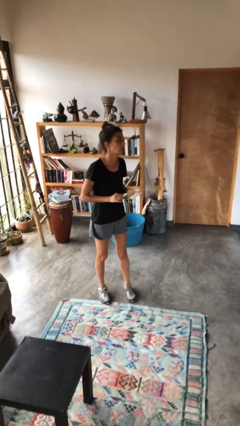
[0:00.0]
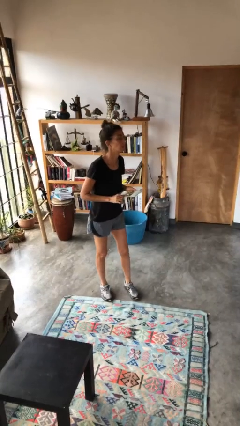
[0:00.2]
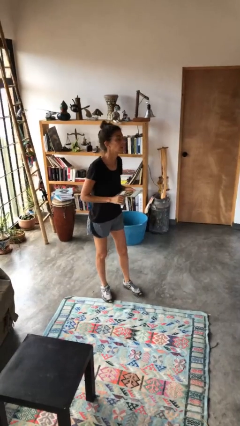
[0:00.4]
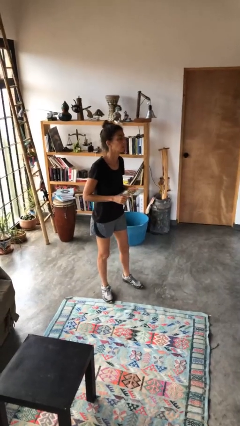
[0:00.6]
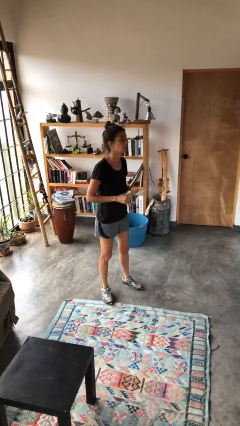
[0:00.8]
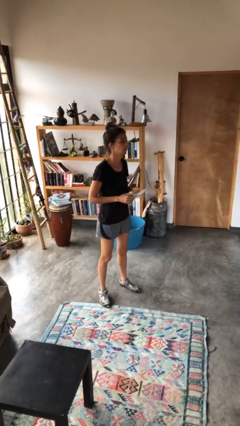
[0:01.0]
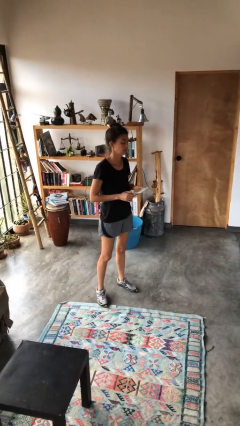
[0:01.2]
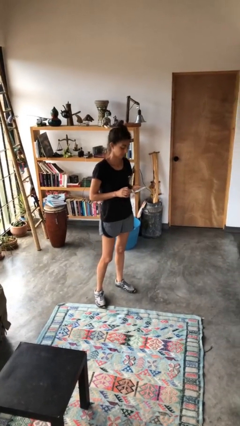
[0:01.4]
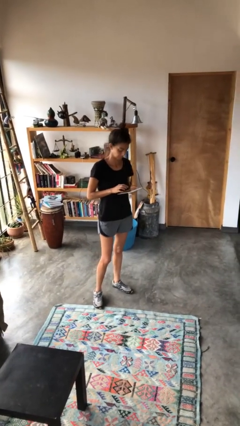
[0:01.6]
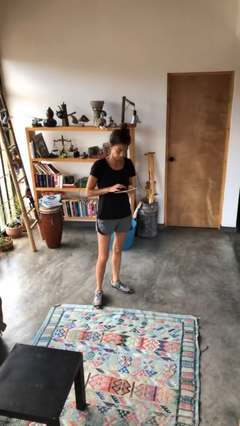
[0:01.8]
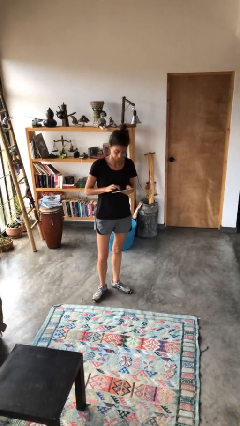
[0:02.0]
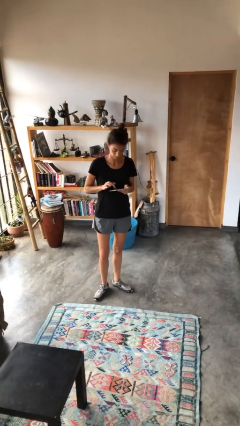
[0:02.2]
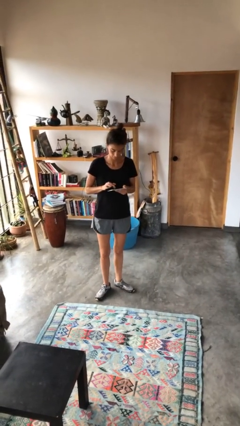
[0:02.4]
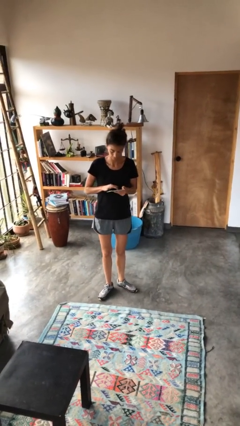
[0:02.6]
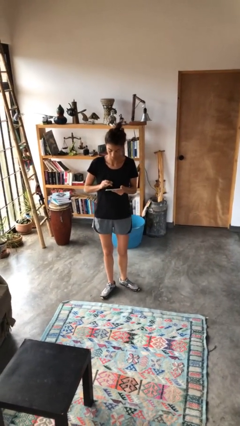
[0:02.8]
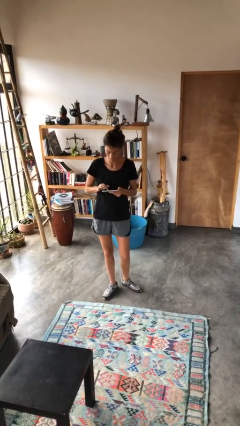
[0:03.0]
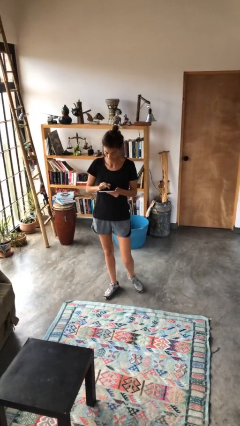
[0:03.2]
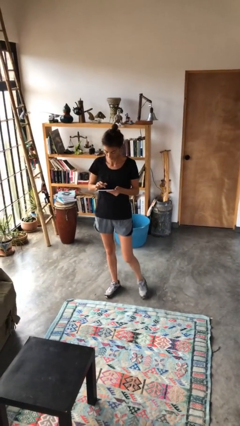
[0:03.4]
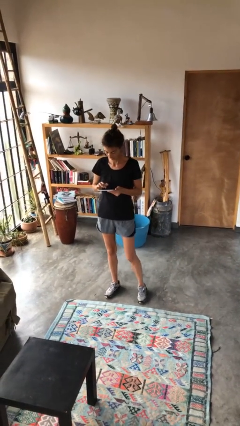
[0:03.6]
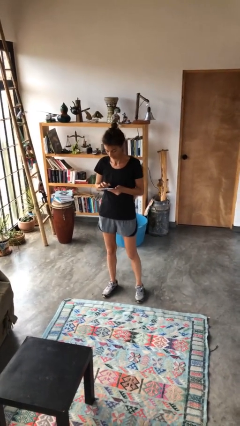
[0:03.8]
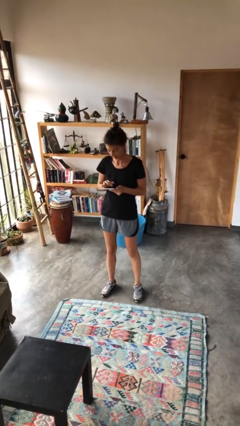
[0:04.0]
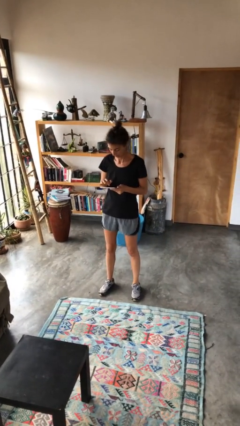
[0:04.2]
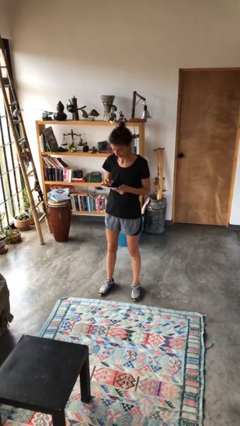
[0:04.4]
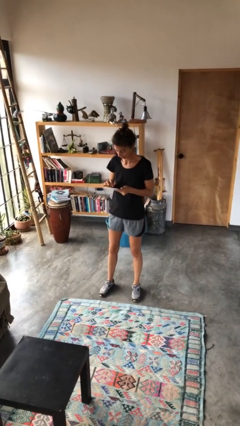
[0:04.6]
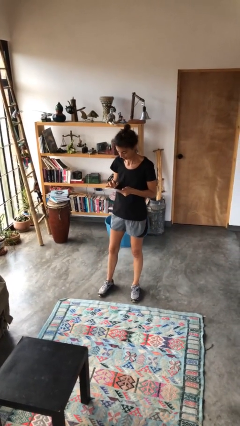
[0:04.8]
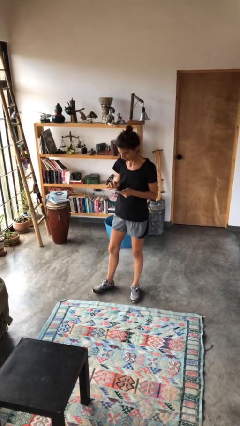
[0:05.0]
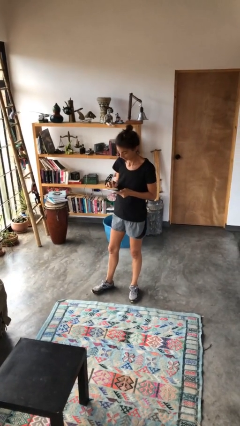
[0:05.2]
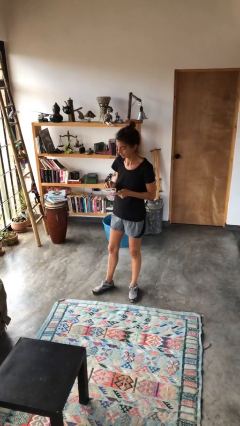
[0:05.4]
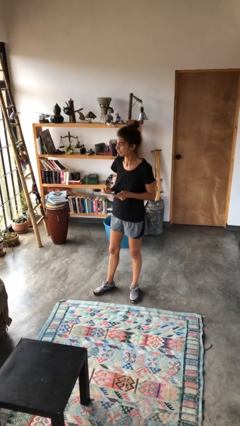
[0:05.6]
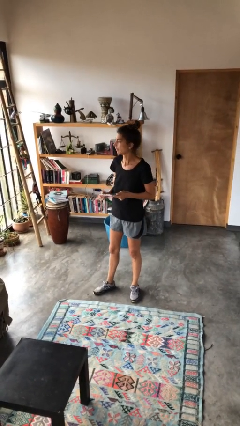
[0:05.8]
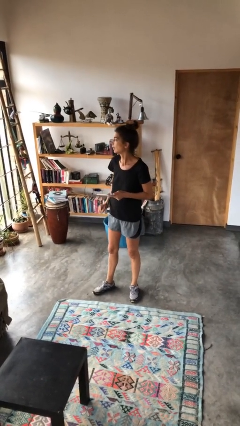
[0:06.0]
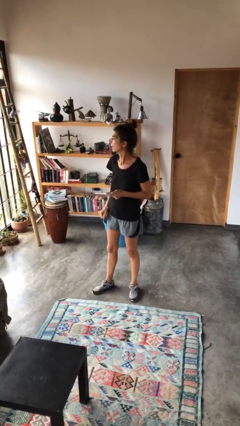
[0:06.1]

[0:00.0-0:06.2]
person interacts with tablet

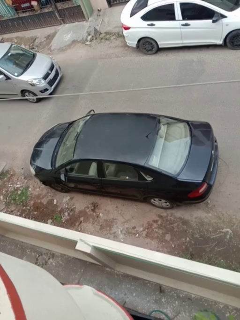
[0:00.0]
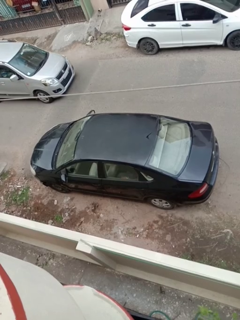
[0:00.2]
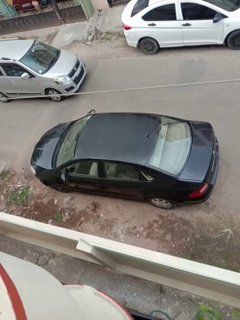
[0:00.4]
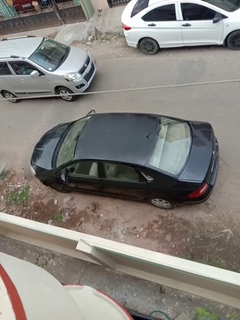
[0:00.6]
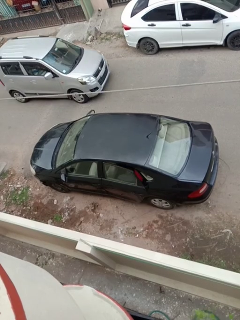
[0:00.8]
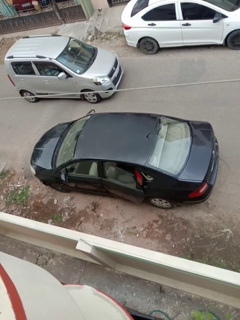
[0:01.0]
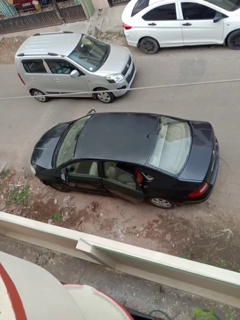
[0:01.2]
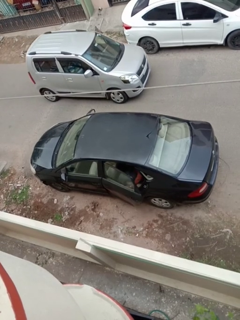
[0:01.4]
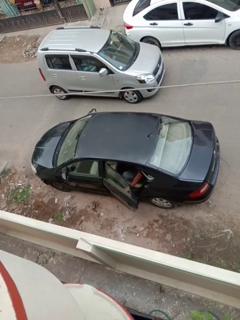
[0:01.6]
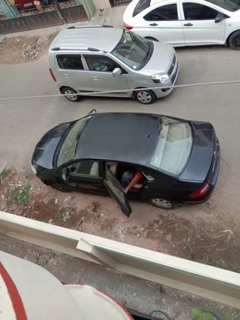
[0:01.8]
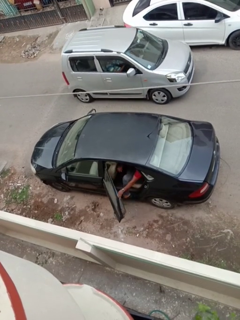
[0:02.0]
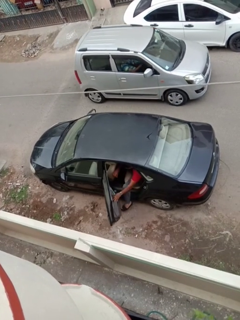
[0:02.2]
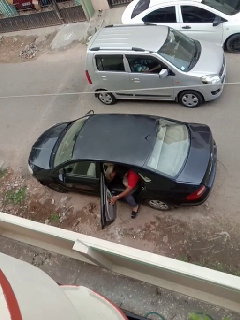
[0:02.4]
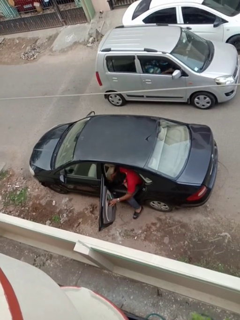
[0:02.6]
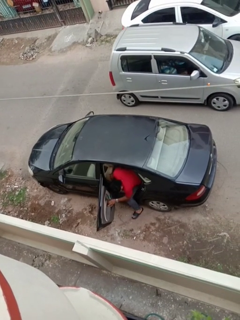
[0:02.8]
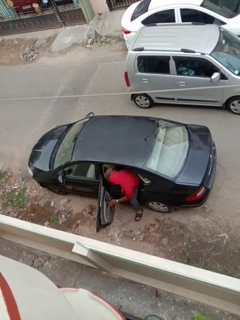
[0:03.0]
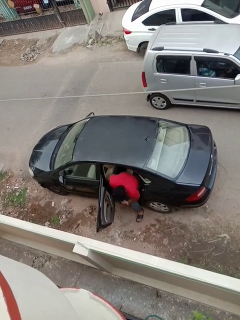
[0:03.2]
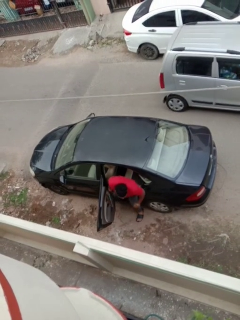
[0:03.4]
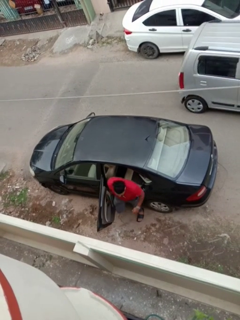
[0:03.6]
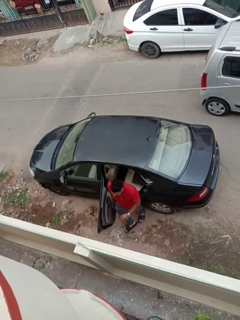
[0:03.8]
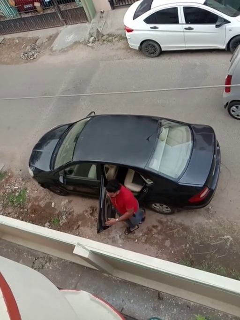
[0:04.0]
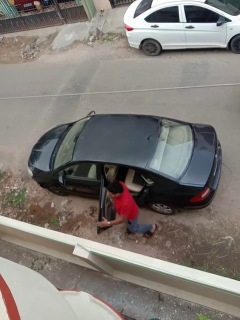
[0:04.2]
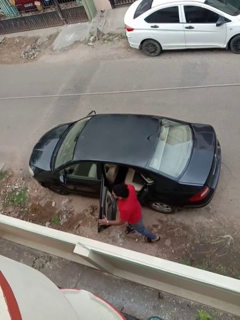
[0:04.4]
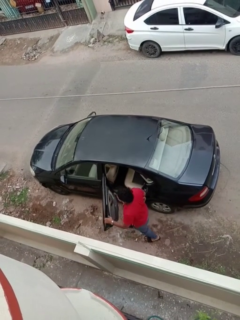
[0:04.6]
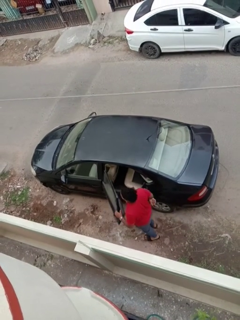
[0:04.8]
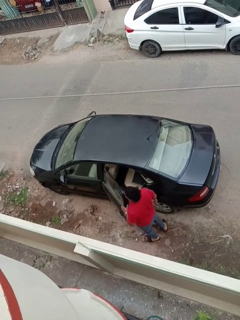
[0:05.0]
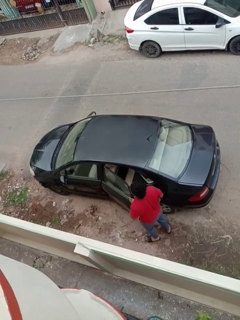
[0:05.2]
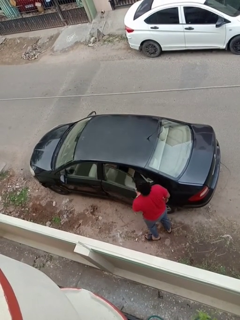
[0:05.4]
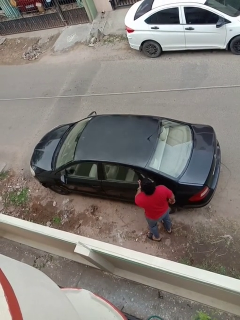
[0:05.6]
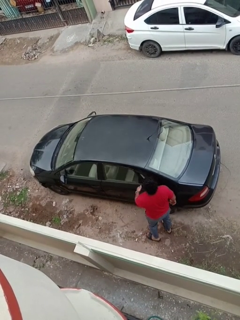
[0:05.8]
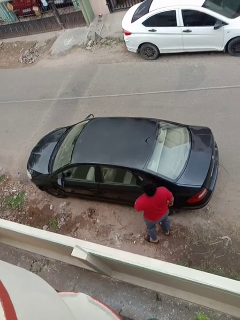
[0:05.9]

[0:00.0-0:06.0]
car drops off person

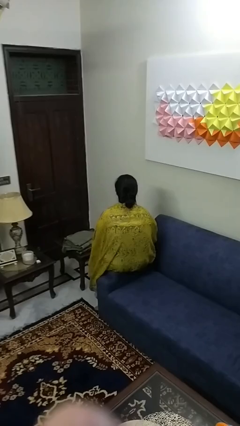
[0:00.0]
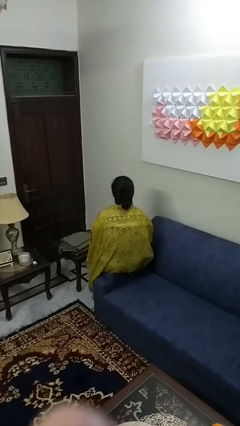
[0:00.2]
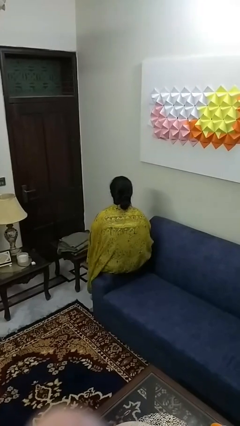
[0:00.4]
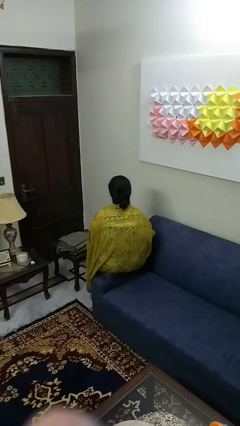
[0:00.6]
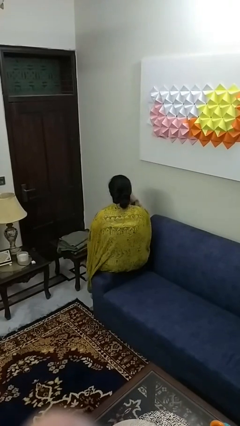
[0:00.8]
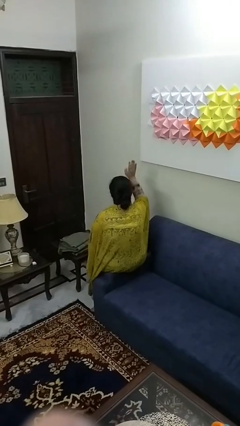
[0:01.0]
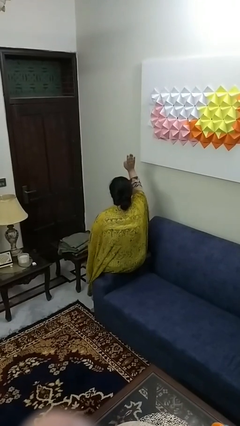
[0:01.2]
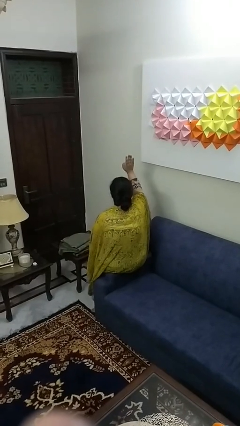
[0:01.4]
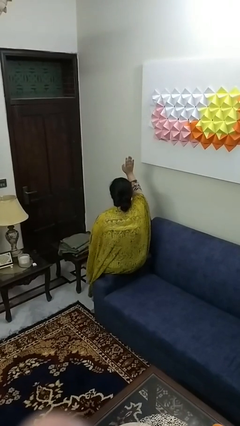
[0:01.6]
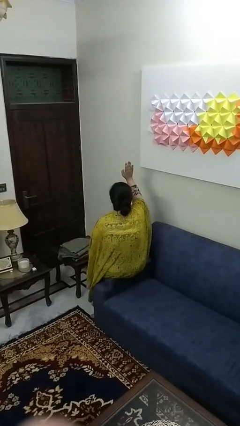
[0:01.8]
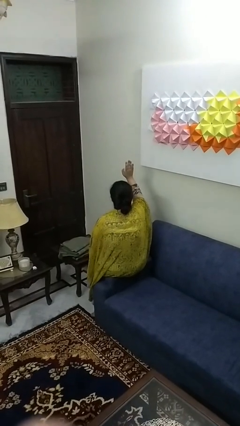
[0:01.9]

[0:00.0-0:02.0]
person gestures raise hand

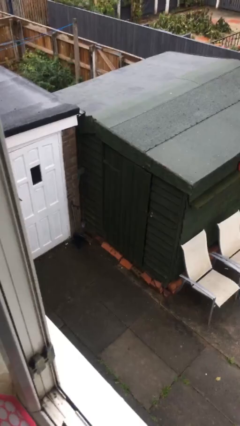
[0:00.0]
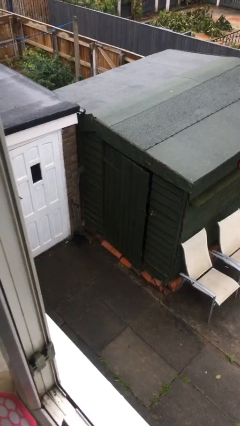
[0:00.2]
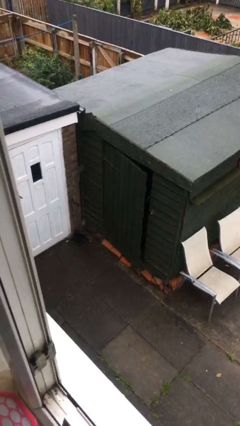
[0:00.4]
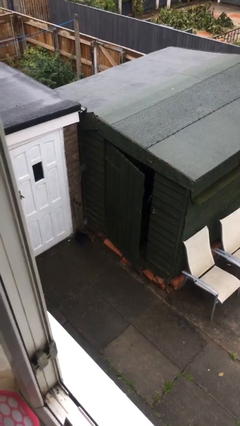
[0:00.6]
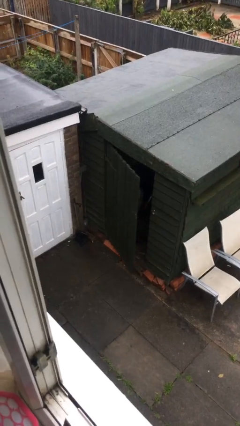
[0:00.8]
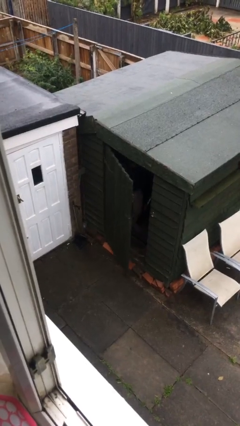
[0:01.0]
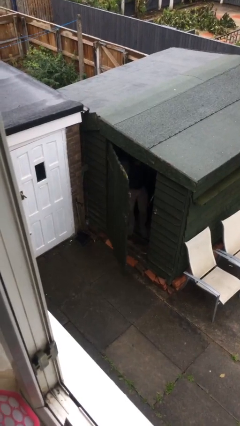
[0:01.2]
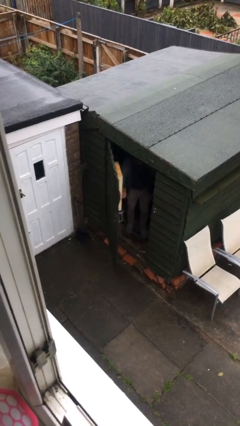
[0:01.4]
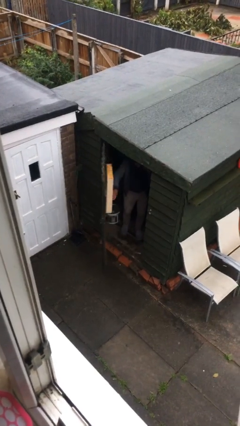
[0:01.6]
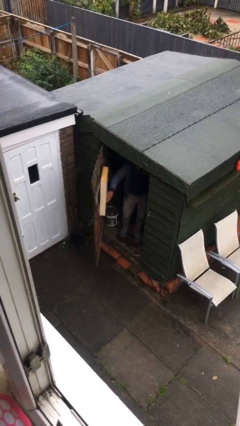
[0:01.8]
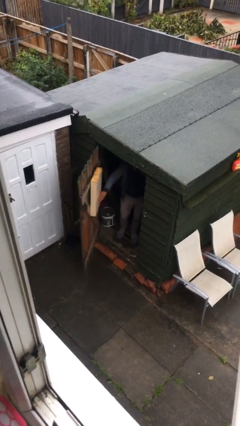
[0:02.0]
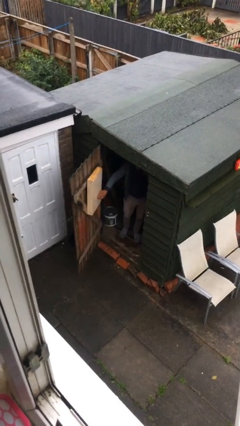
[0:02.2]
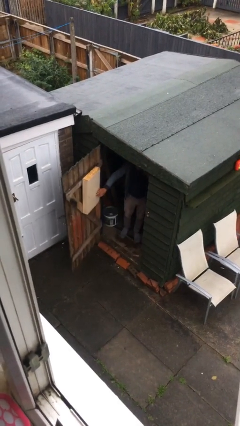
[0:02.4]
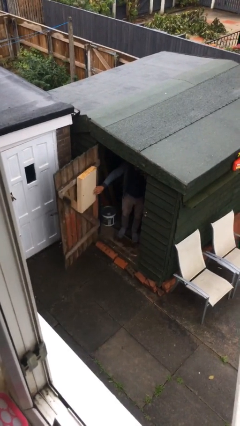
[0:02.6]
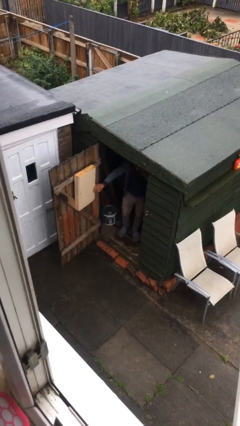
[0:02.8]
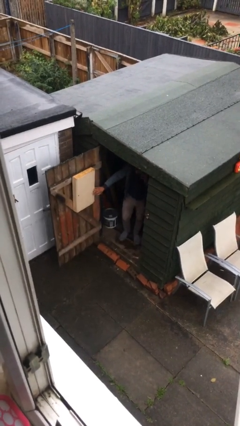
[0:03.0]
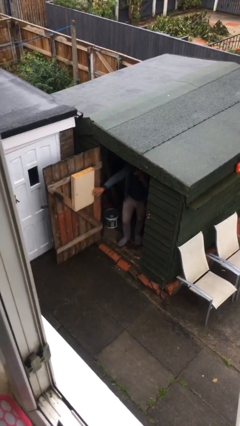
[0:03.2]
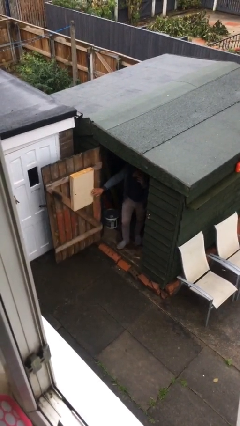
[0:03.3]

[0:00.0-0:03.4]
person opens facility door

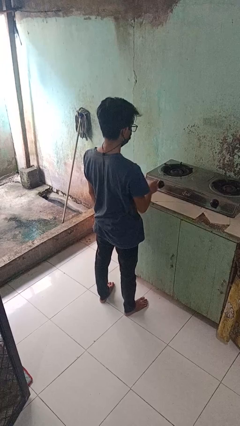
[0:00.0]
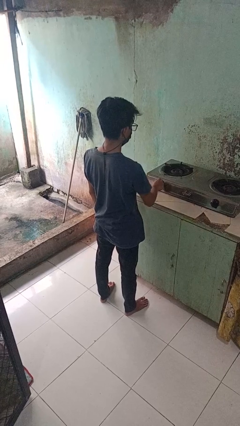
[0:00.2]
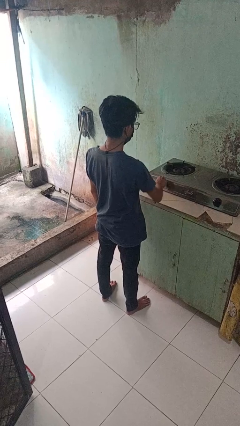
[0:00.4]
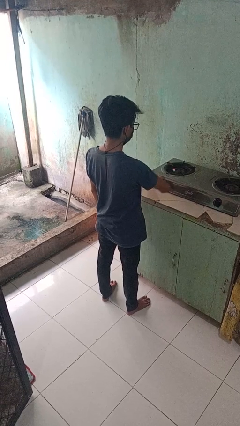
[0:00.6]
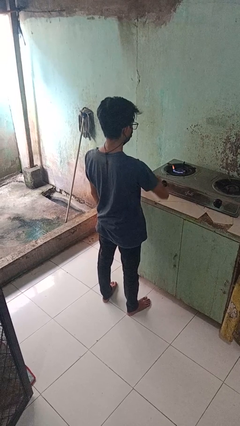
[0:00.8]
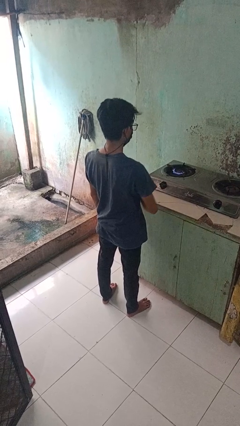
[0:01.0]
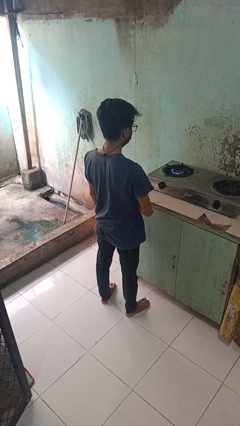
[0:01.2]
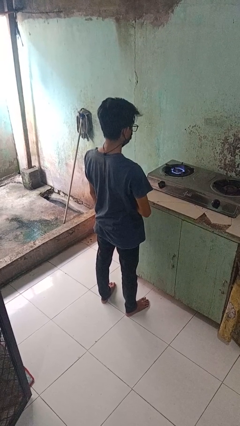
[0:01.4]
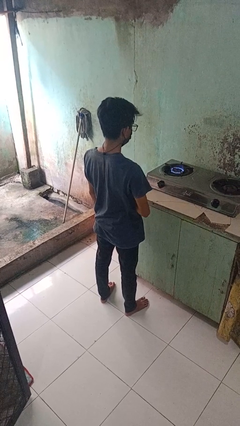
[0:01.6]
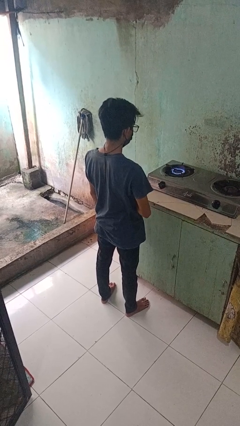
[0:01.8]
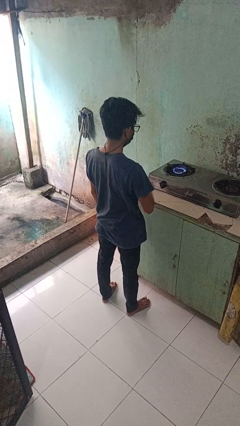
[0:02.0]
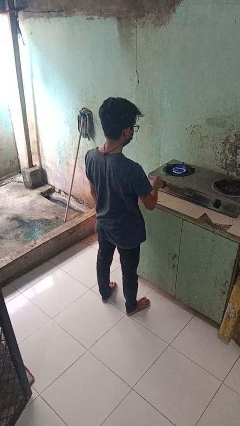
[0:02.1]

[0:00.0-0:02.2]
person turns on stovetop
